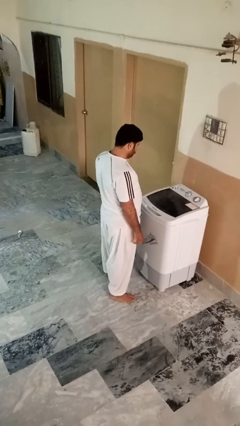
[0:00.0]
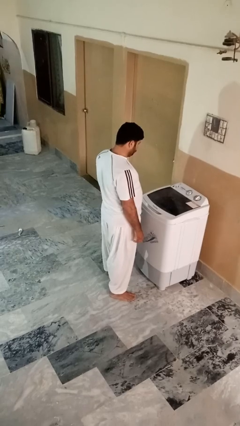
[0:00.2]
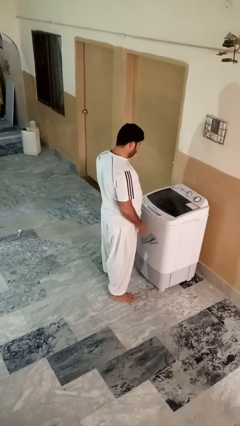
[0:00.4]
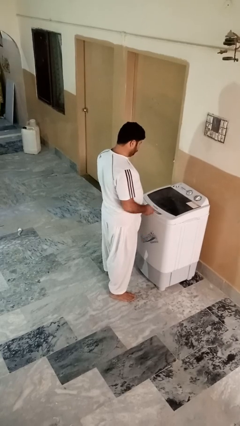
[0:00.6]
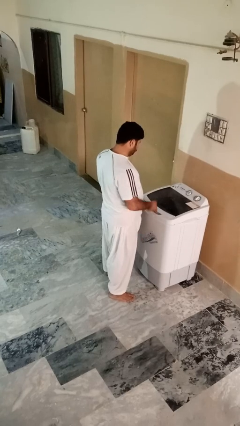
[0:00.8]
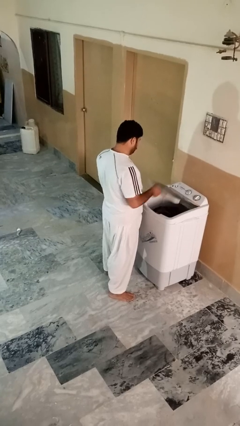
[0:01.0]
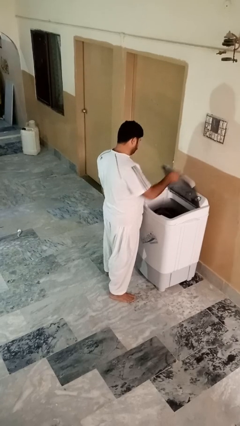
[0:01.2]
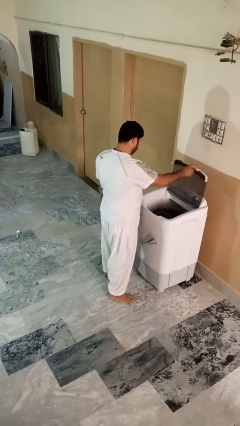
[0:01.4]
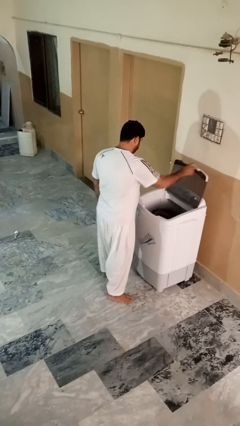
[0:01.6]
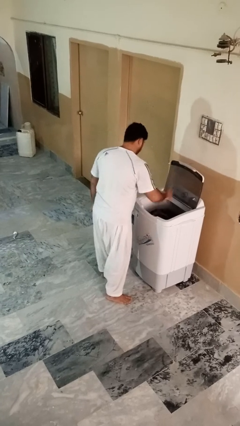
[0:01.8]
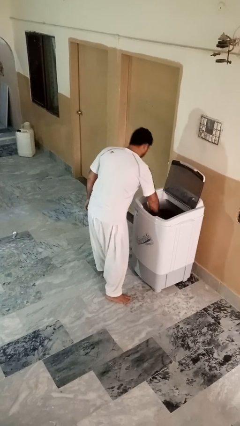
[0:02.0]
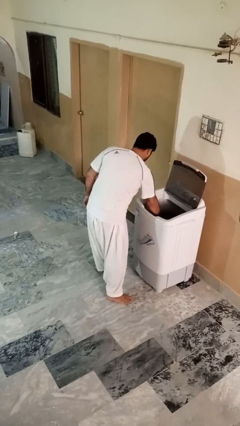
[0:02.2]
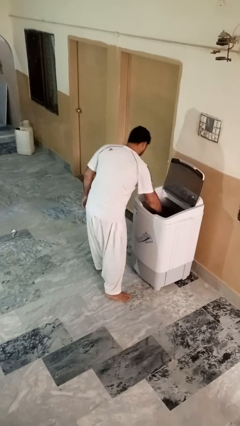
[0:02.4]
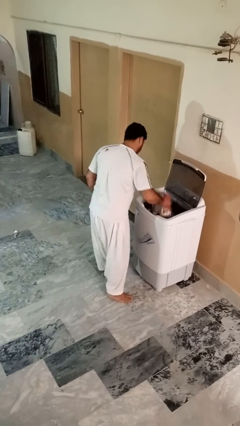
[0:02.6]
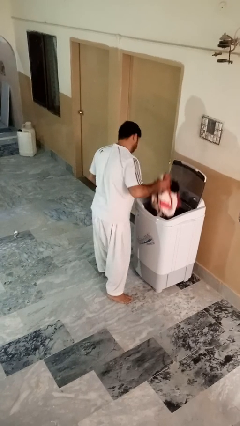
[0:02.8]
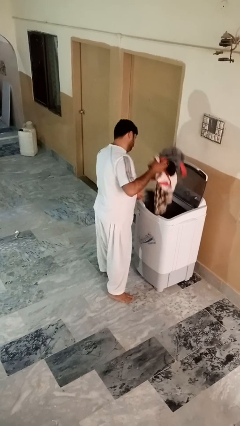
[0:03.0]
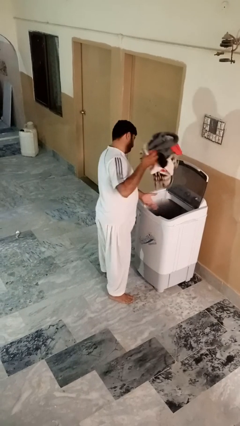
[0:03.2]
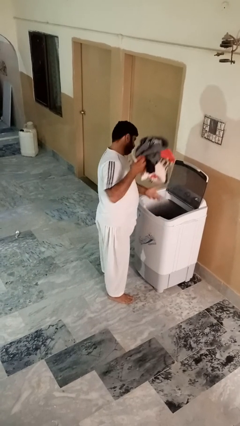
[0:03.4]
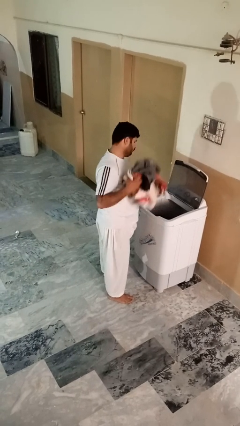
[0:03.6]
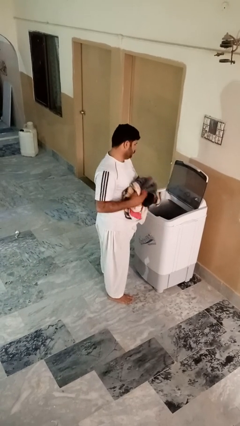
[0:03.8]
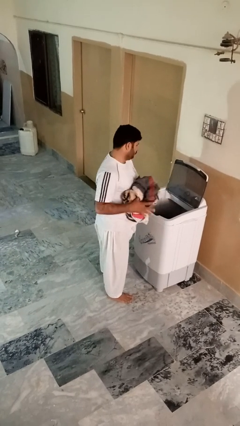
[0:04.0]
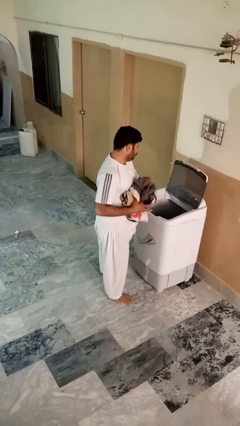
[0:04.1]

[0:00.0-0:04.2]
person unloads clotheswasher

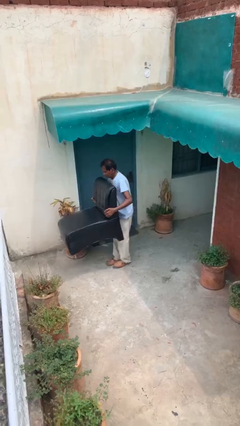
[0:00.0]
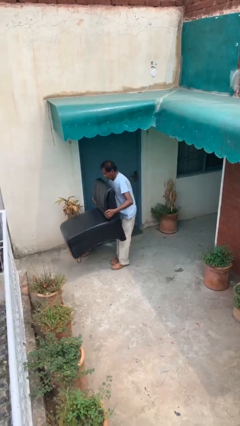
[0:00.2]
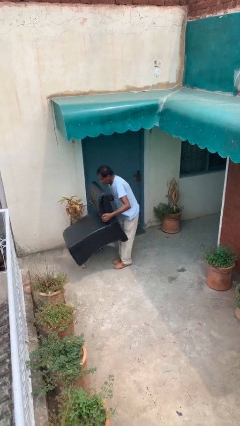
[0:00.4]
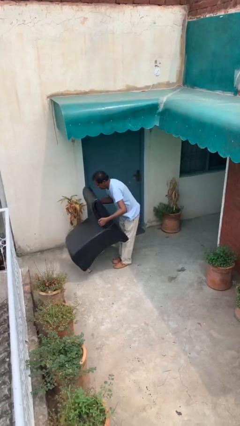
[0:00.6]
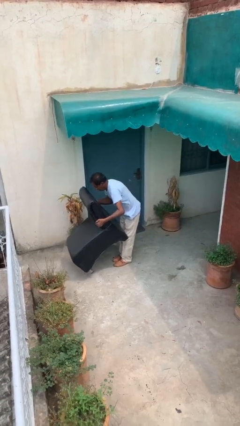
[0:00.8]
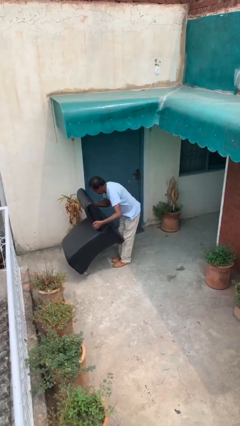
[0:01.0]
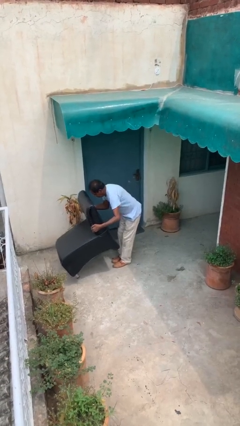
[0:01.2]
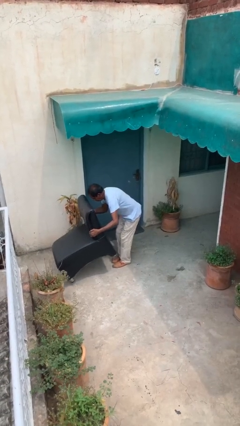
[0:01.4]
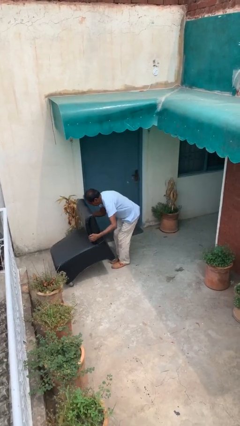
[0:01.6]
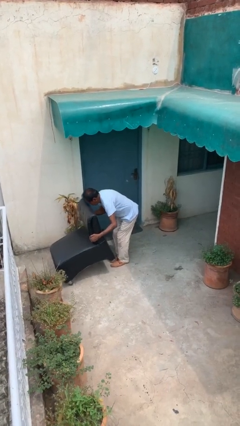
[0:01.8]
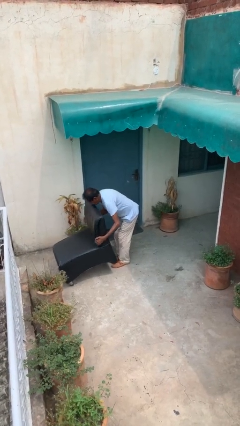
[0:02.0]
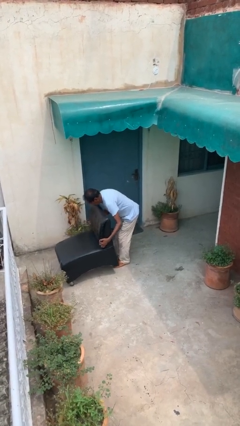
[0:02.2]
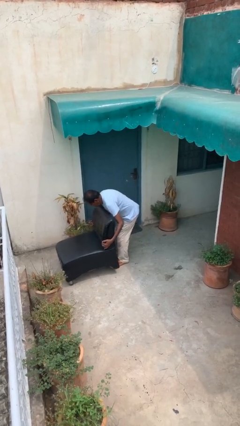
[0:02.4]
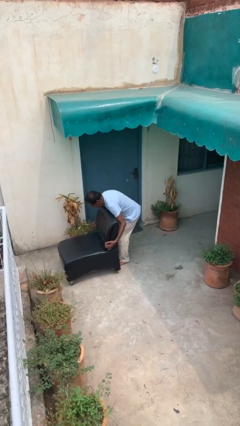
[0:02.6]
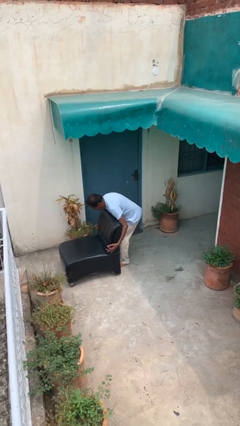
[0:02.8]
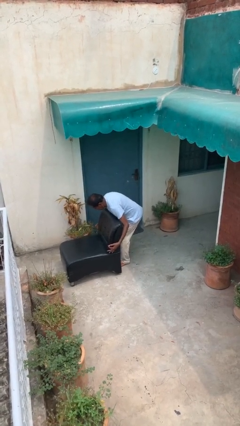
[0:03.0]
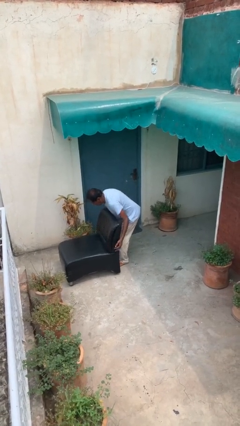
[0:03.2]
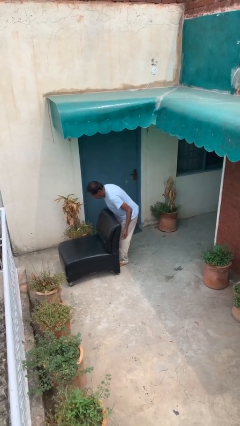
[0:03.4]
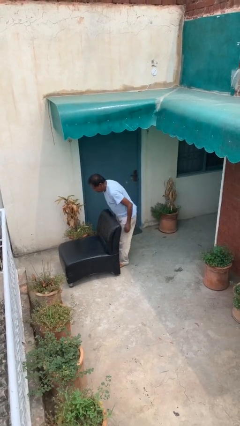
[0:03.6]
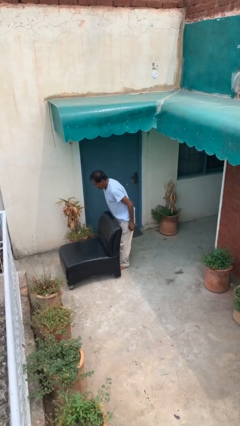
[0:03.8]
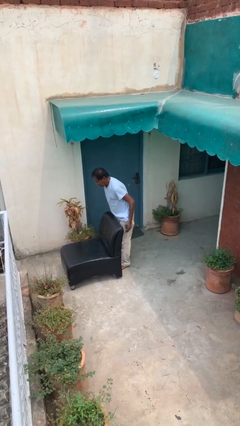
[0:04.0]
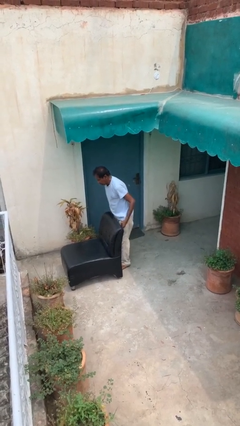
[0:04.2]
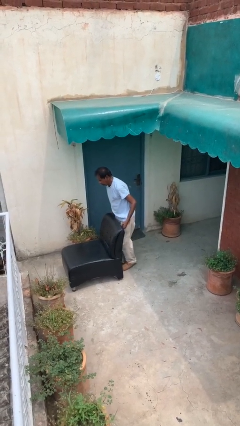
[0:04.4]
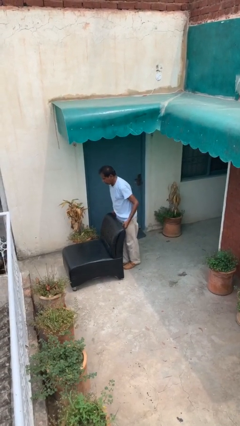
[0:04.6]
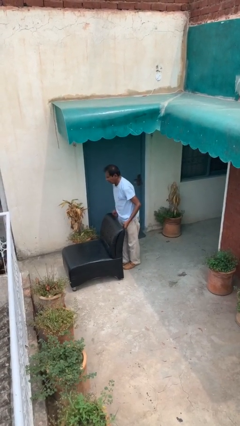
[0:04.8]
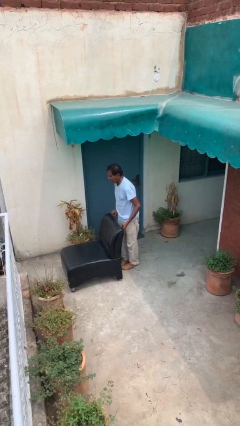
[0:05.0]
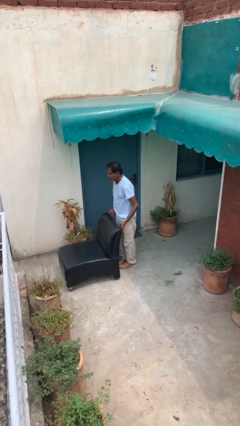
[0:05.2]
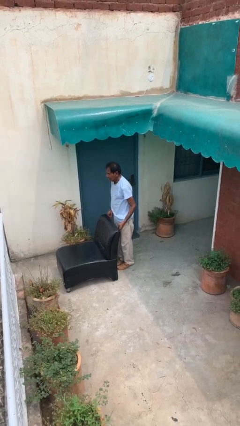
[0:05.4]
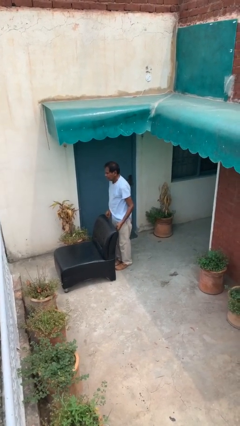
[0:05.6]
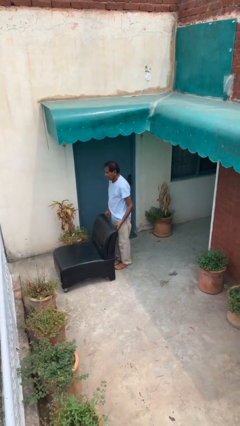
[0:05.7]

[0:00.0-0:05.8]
person puts down object on floor

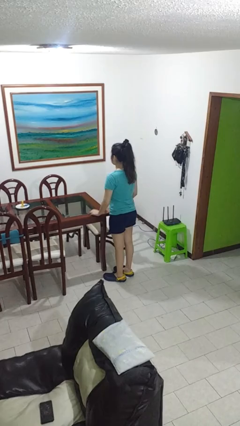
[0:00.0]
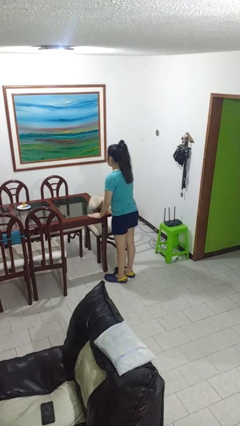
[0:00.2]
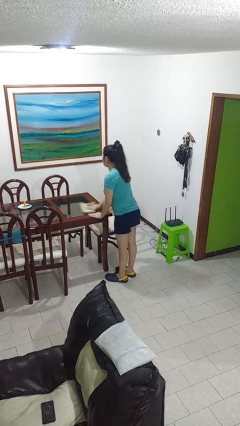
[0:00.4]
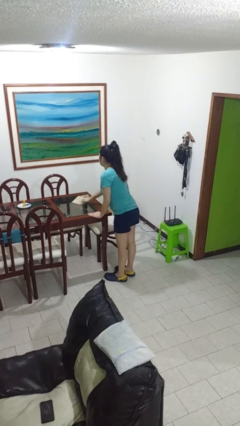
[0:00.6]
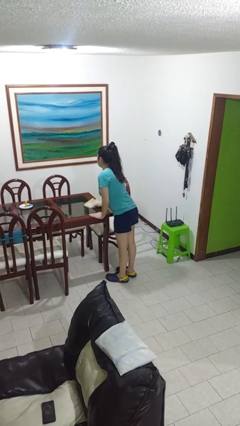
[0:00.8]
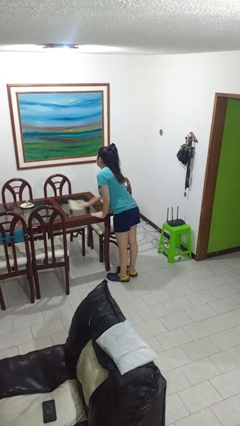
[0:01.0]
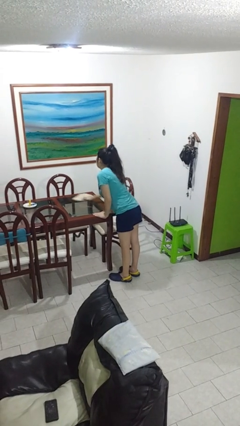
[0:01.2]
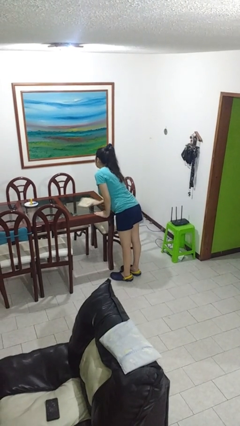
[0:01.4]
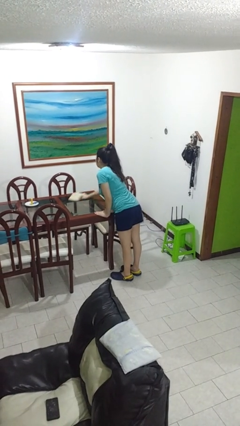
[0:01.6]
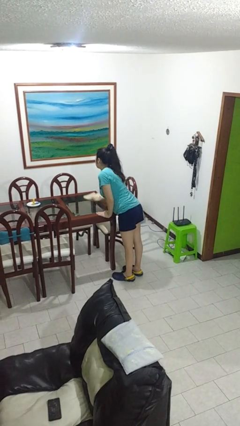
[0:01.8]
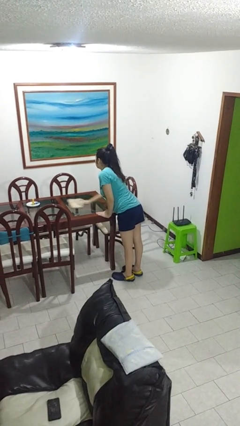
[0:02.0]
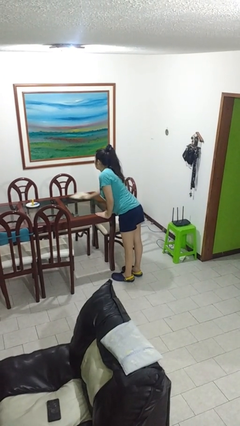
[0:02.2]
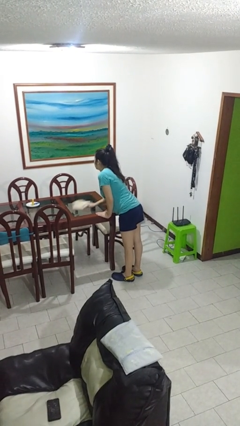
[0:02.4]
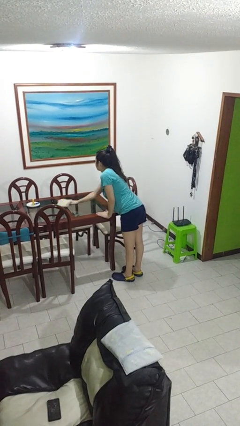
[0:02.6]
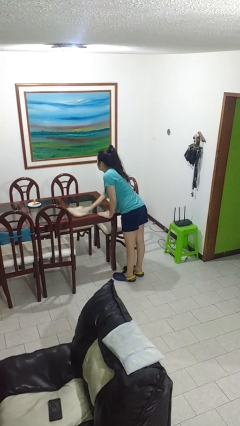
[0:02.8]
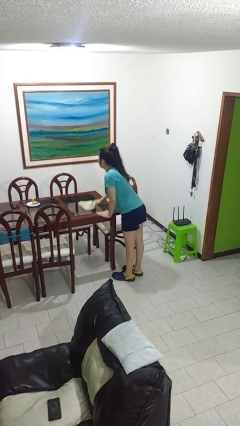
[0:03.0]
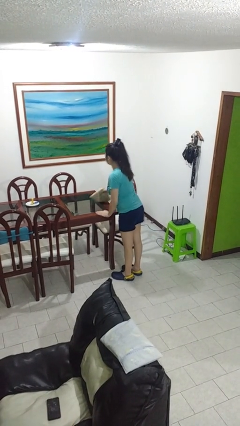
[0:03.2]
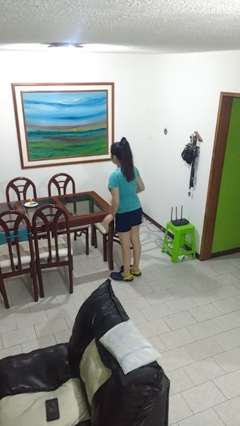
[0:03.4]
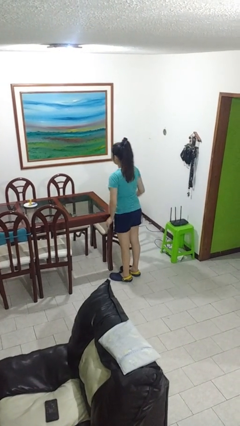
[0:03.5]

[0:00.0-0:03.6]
person cleans table with rag

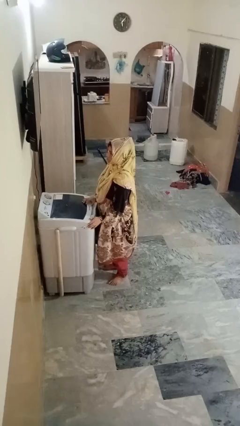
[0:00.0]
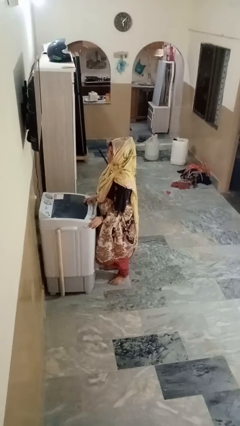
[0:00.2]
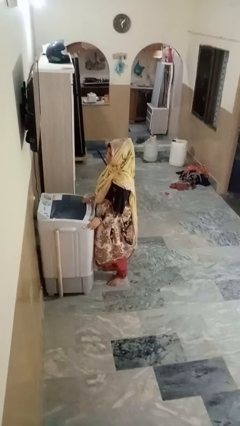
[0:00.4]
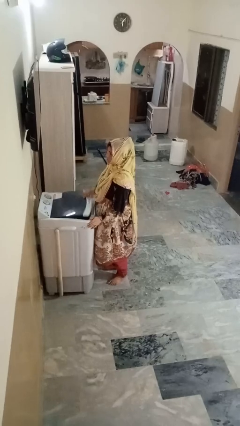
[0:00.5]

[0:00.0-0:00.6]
person closes clothes washer

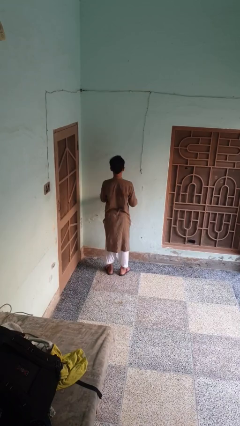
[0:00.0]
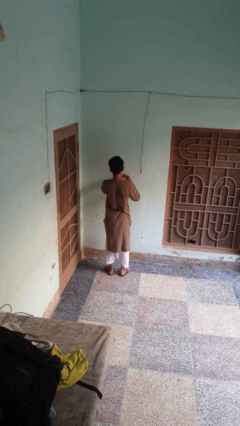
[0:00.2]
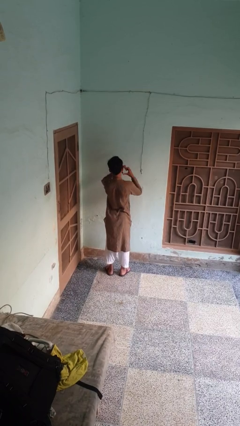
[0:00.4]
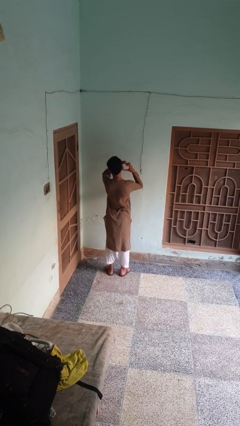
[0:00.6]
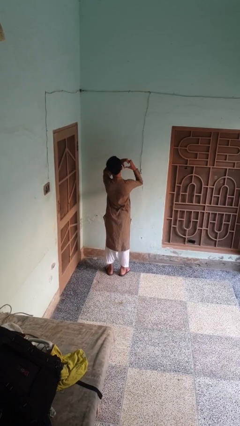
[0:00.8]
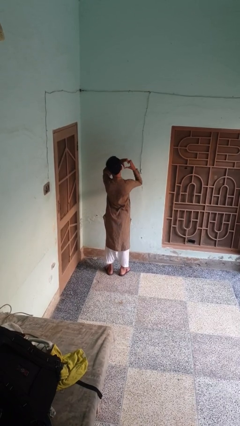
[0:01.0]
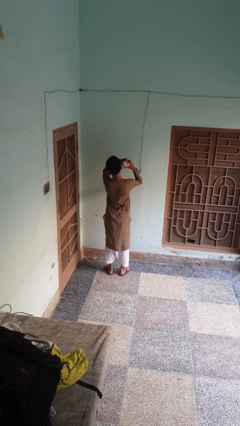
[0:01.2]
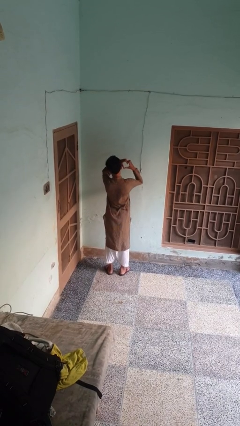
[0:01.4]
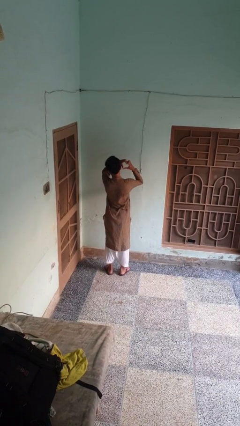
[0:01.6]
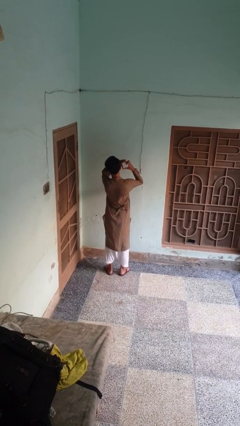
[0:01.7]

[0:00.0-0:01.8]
person gestures heart

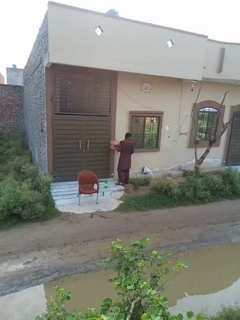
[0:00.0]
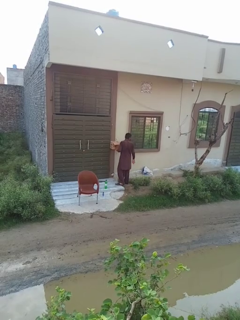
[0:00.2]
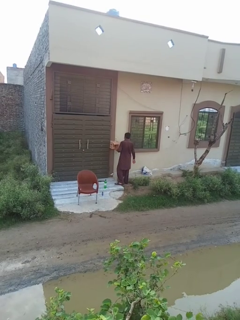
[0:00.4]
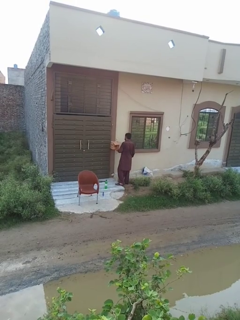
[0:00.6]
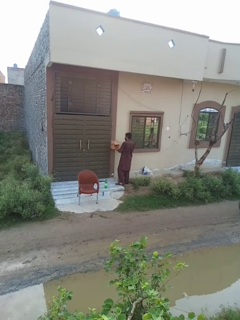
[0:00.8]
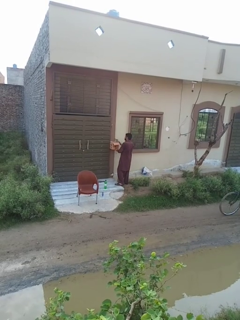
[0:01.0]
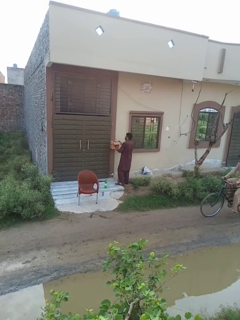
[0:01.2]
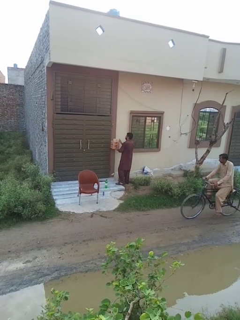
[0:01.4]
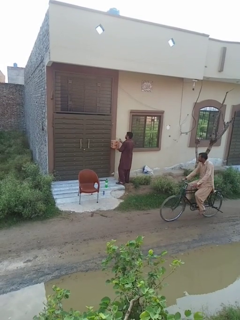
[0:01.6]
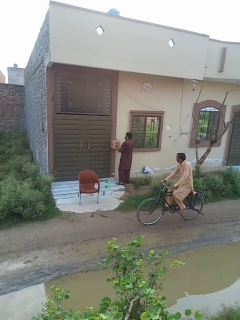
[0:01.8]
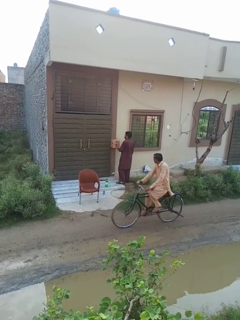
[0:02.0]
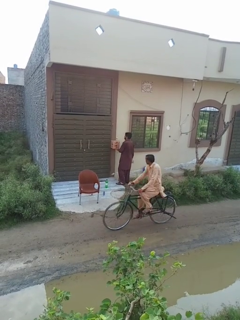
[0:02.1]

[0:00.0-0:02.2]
person closes mailbox
